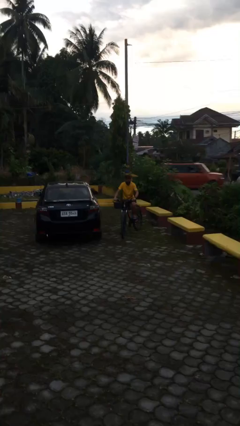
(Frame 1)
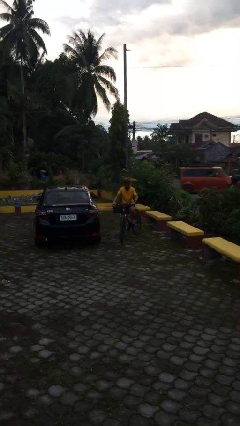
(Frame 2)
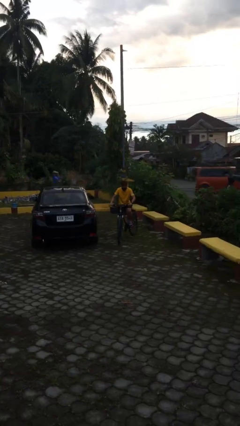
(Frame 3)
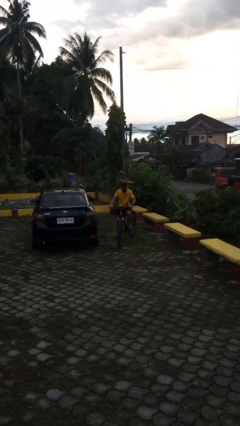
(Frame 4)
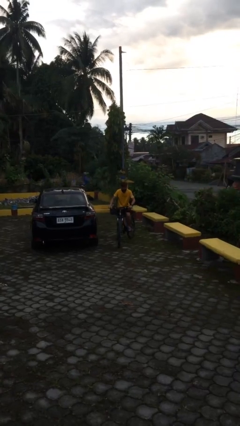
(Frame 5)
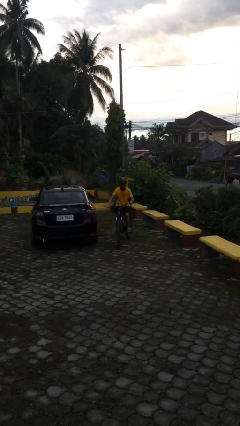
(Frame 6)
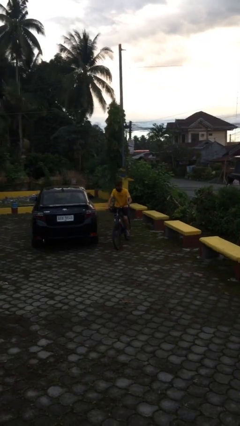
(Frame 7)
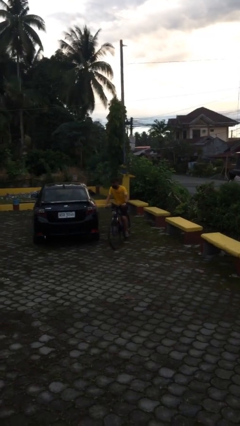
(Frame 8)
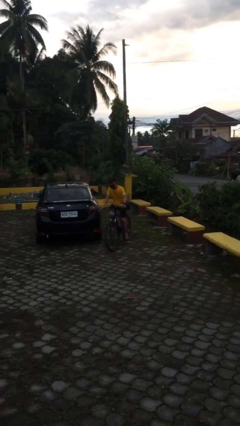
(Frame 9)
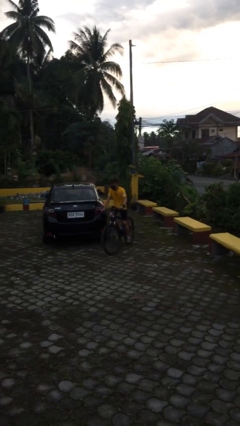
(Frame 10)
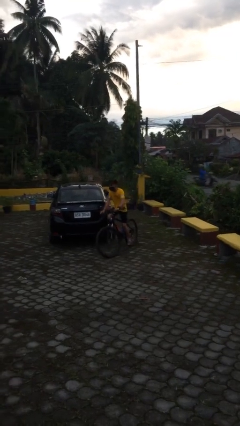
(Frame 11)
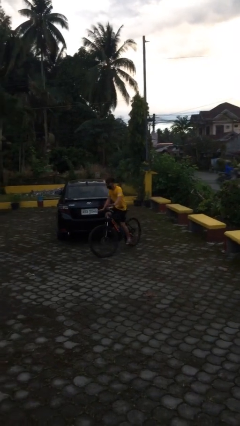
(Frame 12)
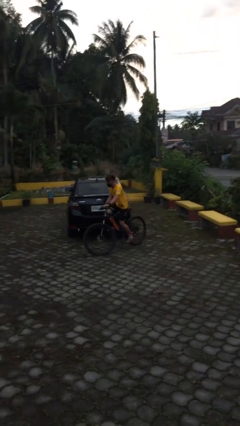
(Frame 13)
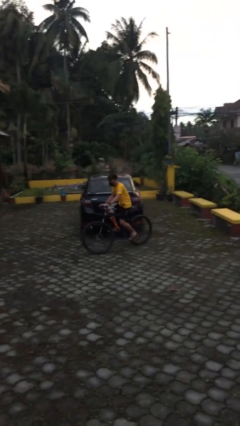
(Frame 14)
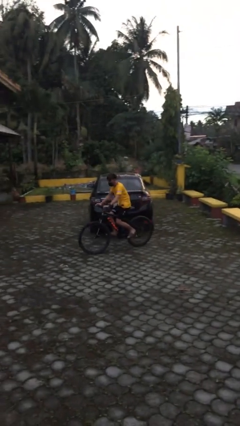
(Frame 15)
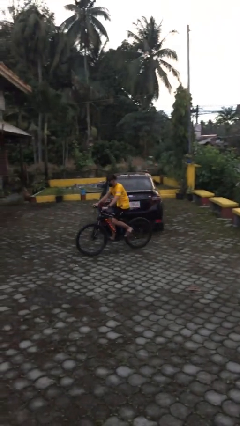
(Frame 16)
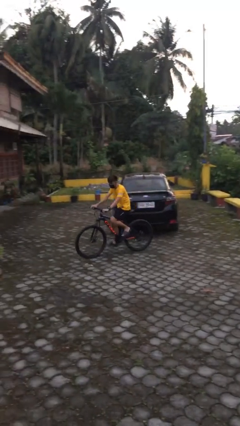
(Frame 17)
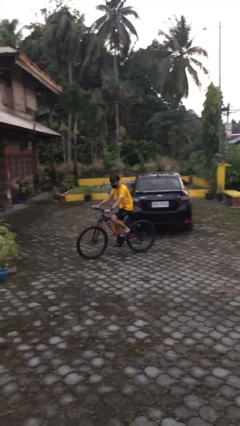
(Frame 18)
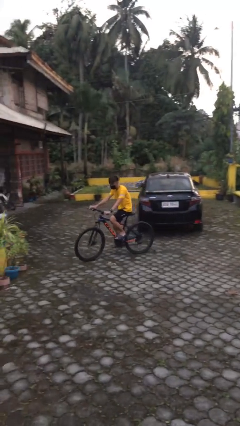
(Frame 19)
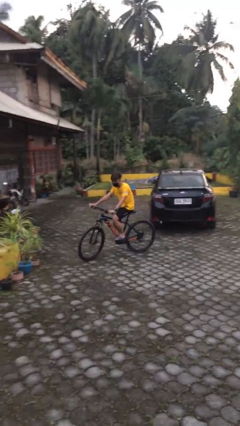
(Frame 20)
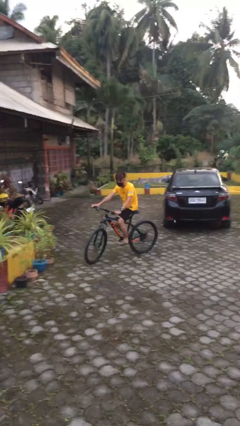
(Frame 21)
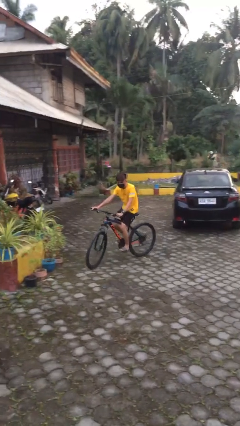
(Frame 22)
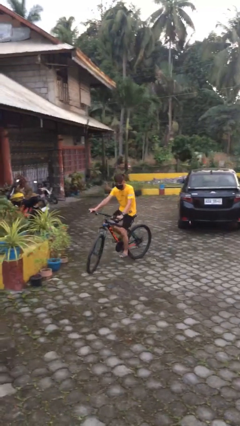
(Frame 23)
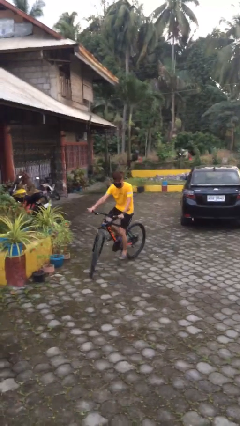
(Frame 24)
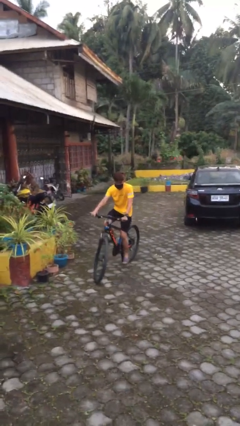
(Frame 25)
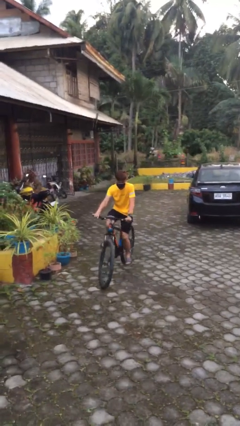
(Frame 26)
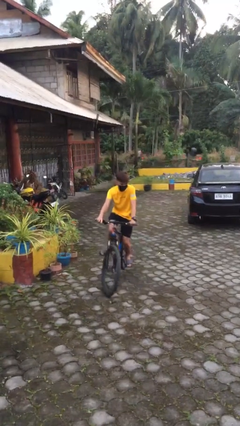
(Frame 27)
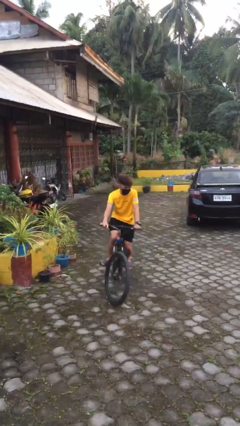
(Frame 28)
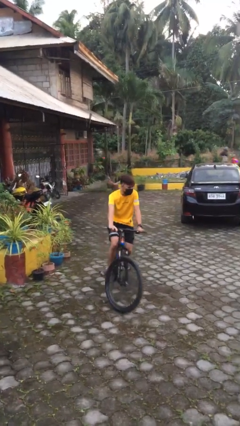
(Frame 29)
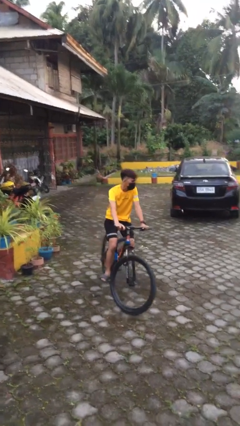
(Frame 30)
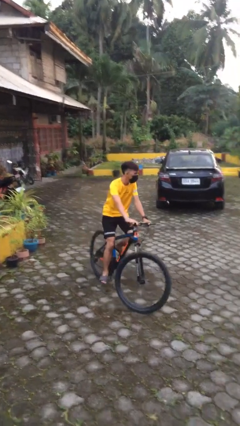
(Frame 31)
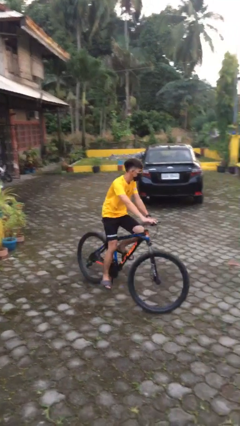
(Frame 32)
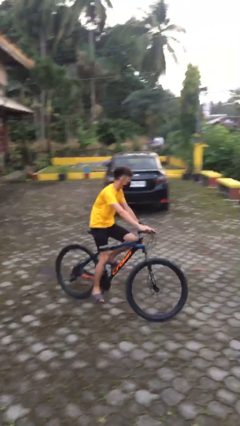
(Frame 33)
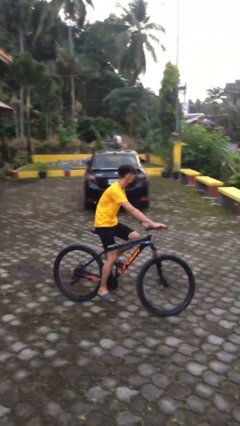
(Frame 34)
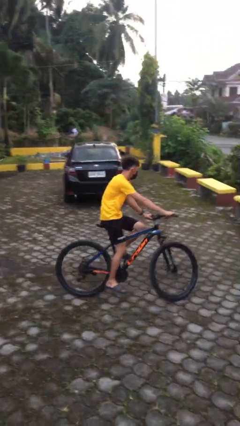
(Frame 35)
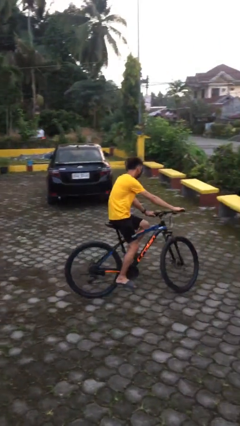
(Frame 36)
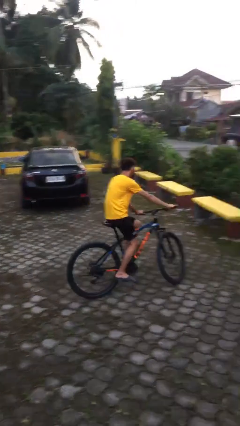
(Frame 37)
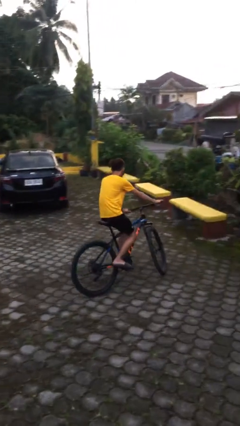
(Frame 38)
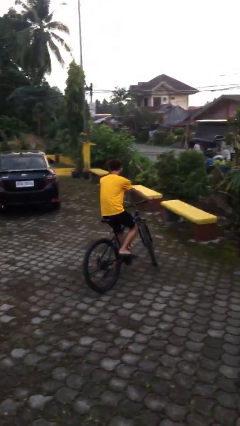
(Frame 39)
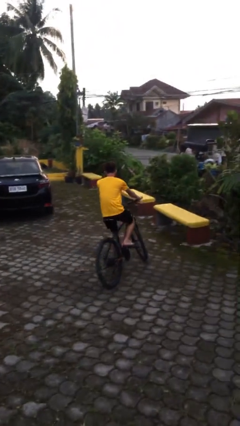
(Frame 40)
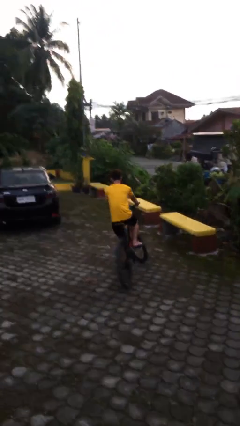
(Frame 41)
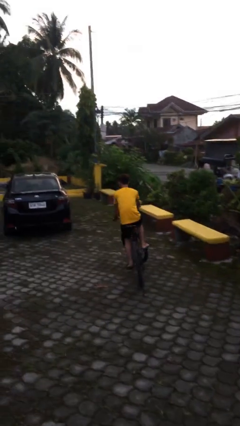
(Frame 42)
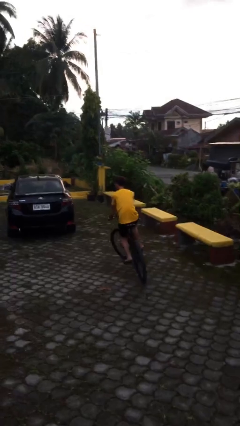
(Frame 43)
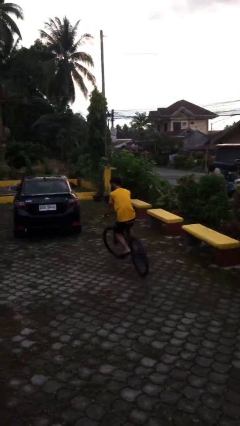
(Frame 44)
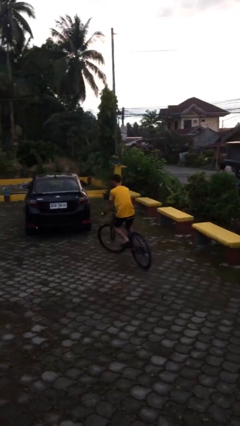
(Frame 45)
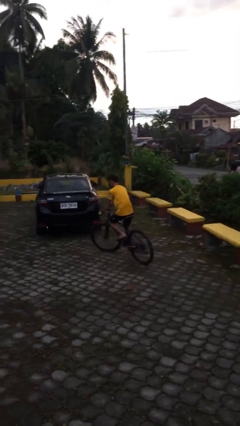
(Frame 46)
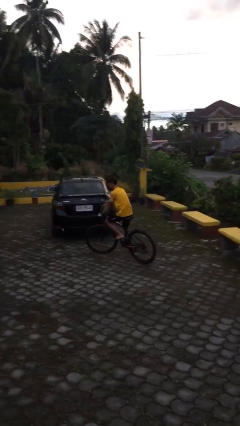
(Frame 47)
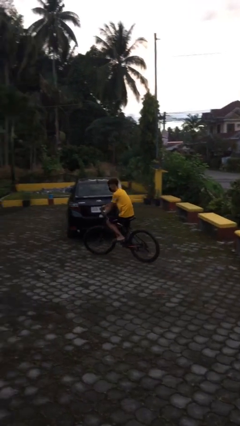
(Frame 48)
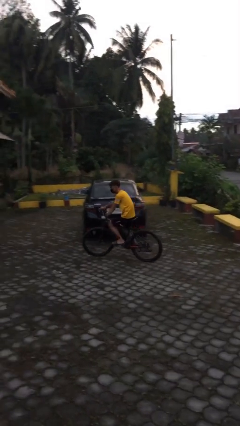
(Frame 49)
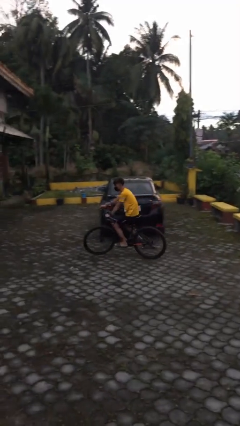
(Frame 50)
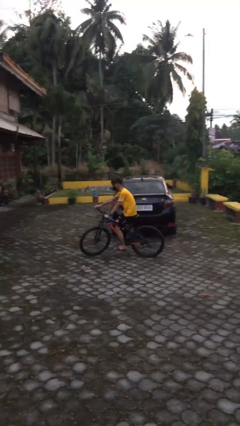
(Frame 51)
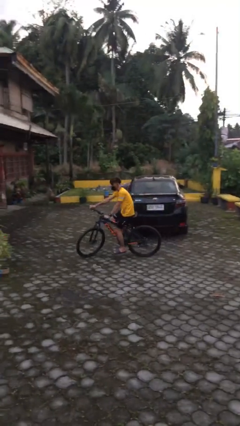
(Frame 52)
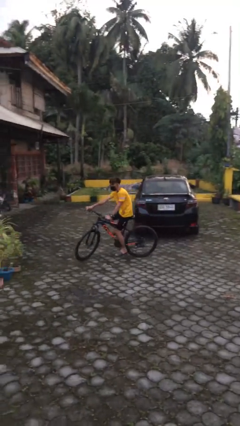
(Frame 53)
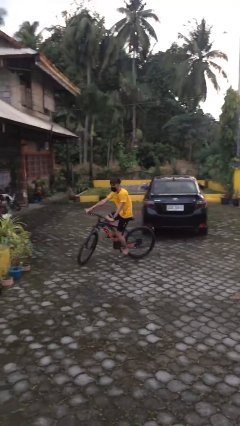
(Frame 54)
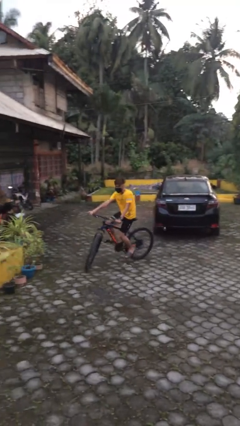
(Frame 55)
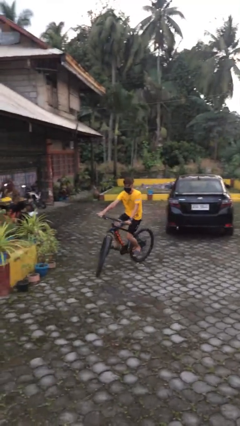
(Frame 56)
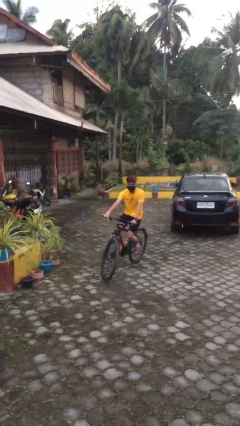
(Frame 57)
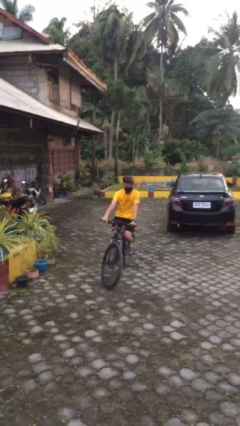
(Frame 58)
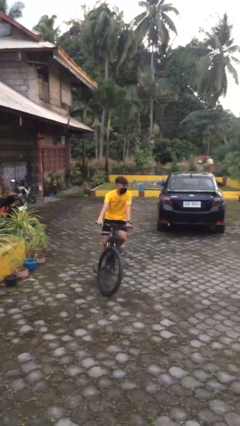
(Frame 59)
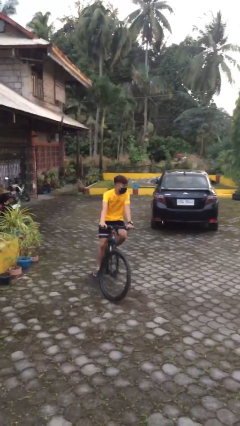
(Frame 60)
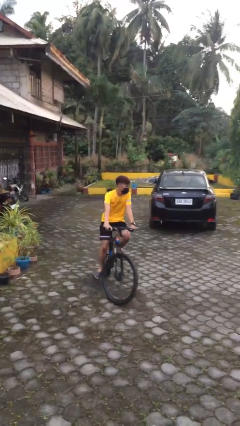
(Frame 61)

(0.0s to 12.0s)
person rides bicycle

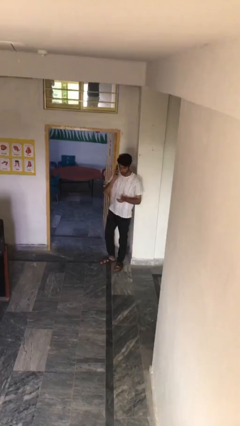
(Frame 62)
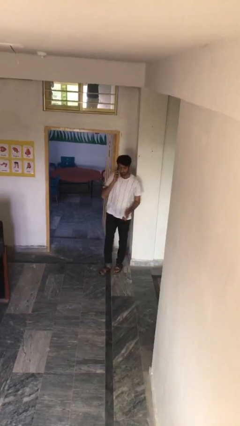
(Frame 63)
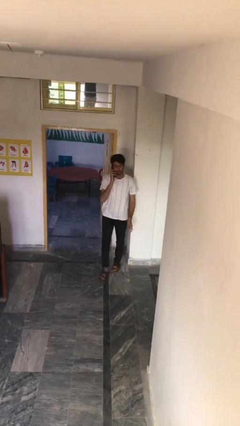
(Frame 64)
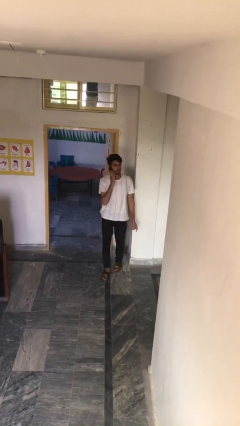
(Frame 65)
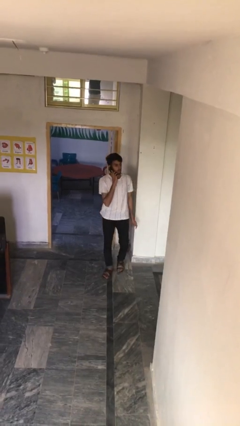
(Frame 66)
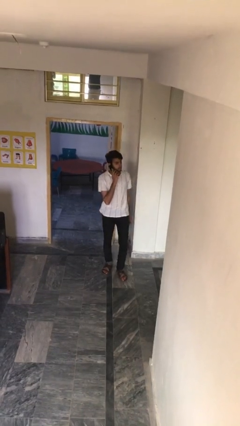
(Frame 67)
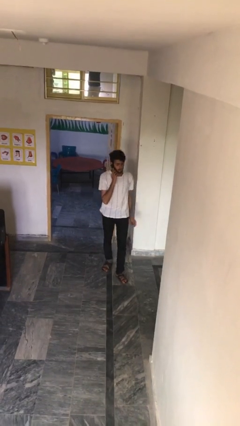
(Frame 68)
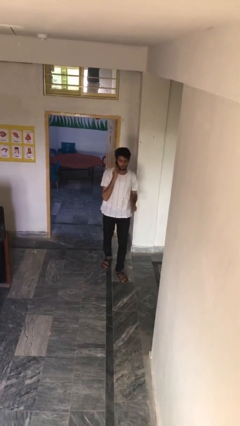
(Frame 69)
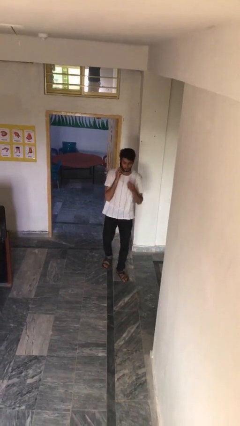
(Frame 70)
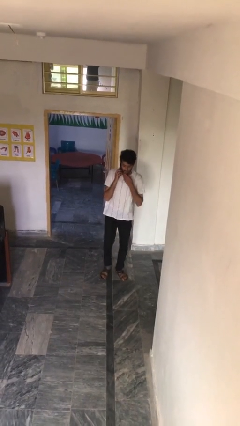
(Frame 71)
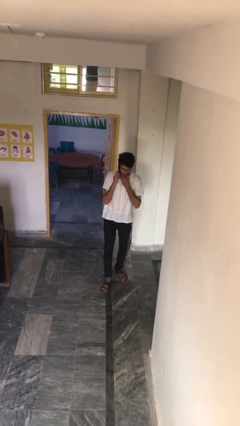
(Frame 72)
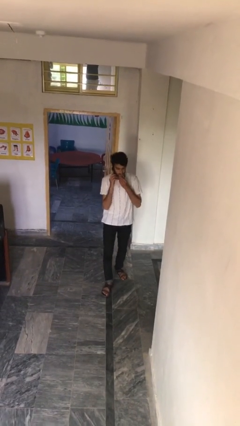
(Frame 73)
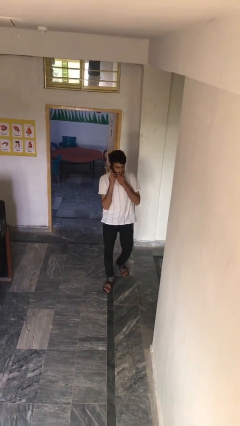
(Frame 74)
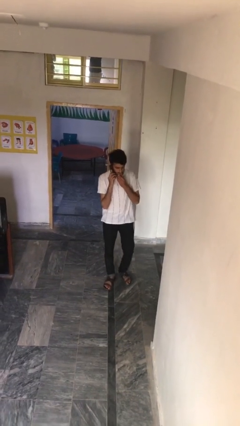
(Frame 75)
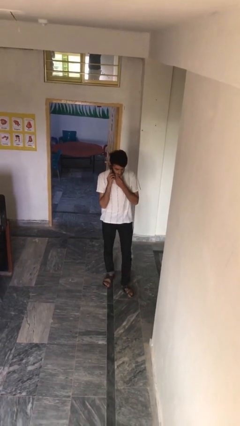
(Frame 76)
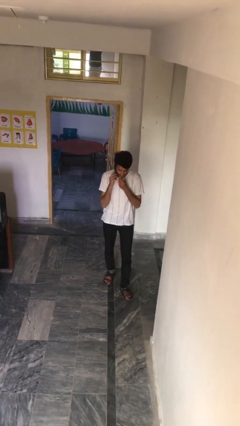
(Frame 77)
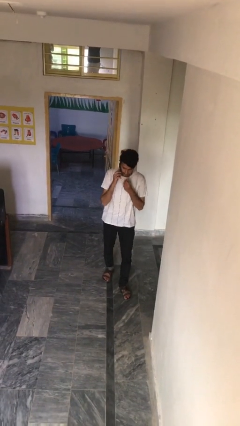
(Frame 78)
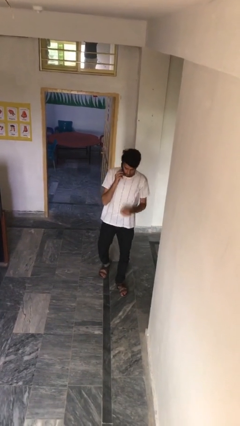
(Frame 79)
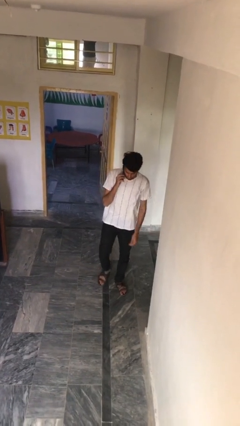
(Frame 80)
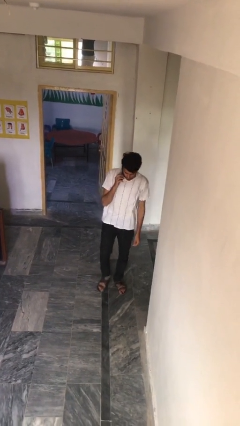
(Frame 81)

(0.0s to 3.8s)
person talks on phone

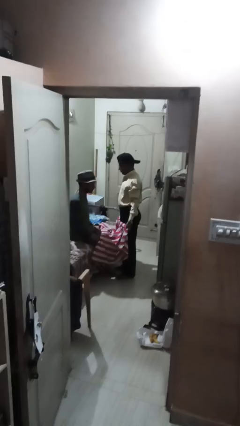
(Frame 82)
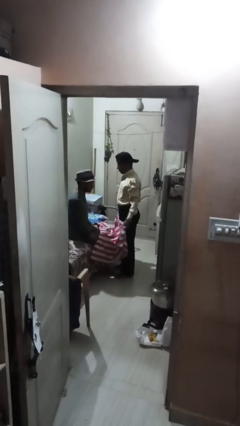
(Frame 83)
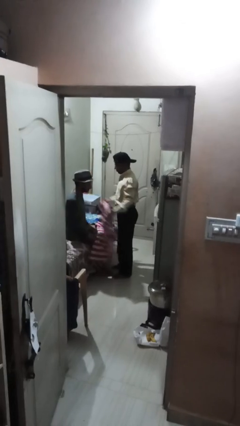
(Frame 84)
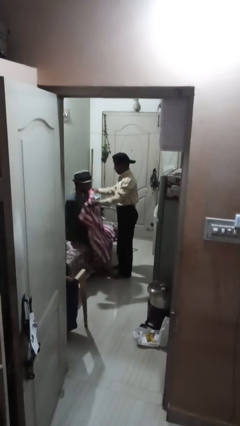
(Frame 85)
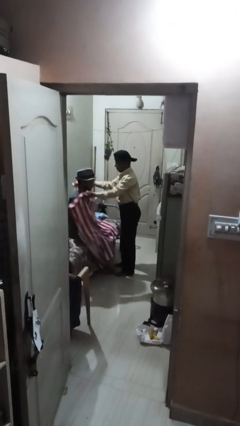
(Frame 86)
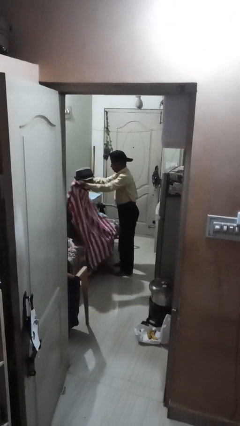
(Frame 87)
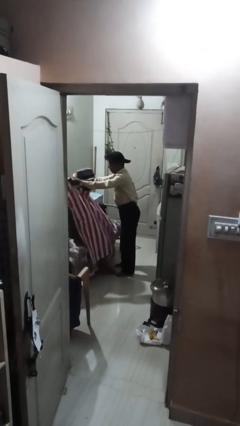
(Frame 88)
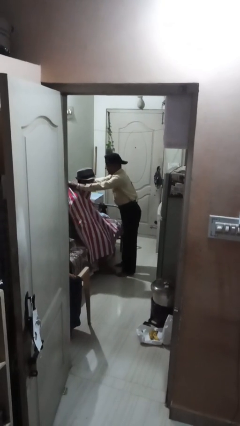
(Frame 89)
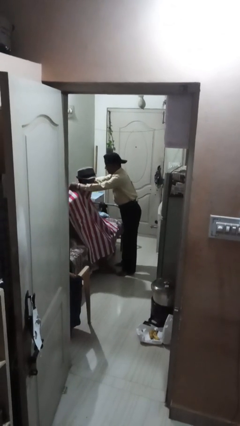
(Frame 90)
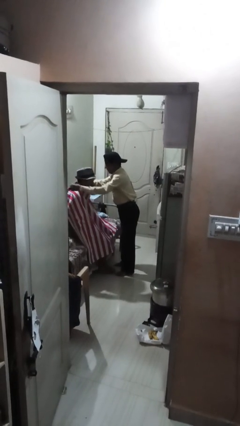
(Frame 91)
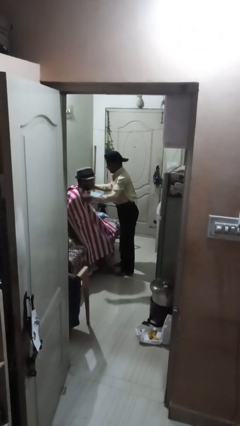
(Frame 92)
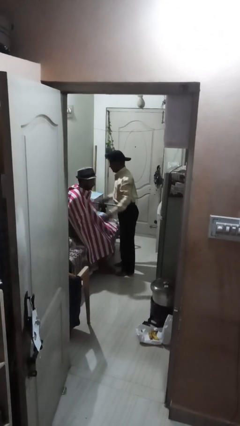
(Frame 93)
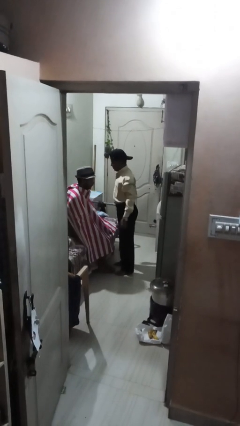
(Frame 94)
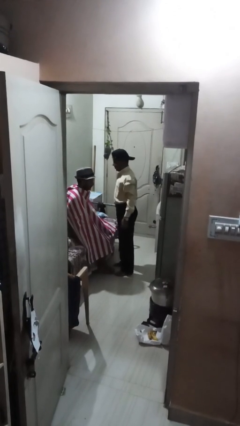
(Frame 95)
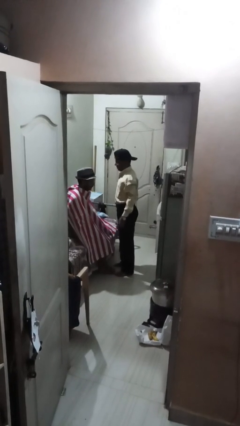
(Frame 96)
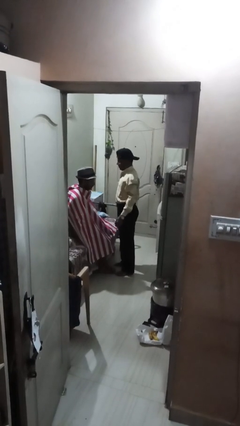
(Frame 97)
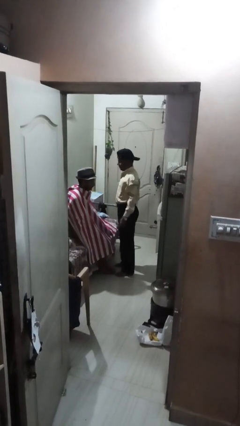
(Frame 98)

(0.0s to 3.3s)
person covers friend with blanket
